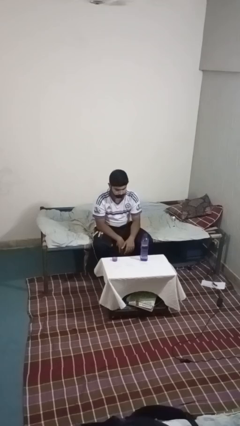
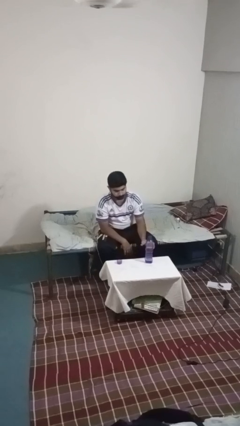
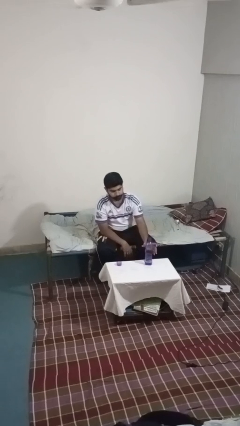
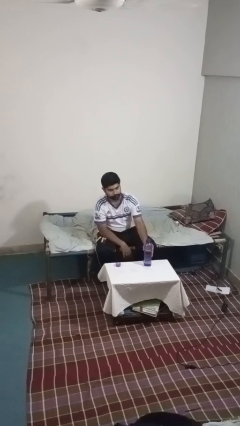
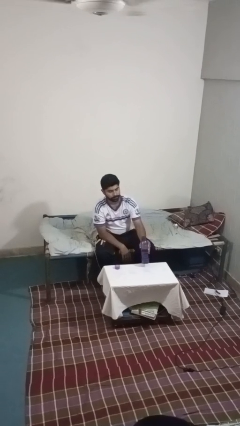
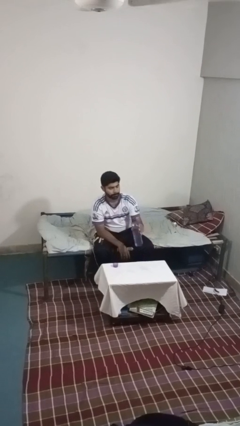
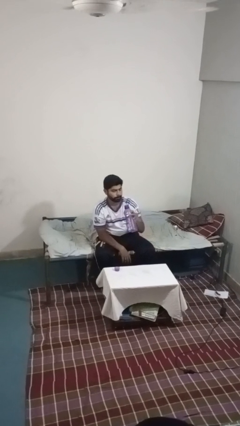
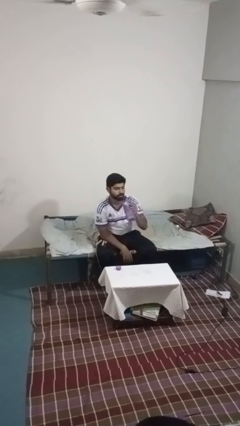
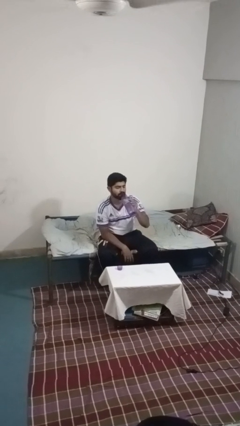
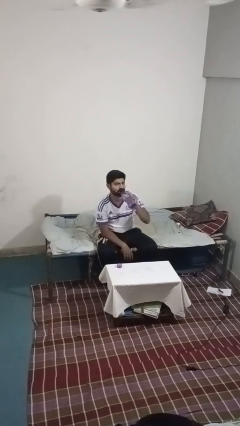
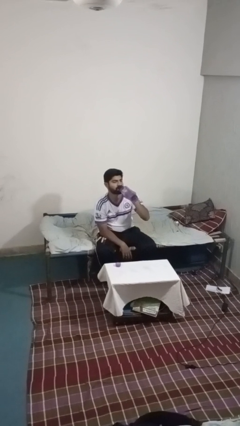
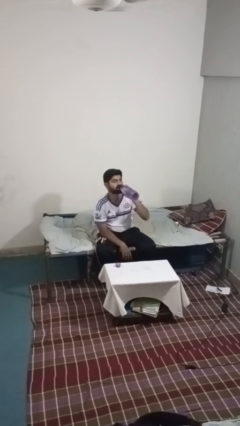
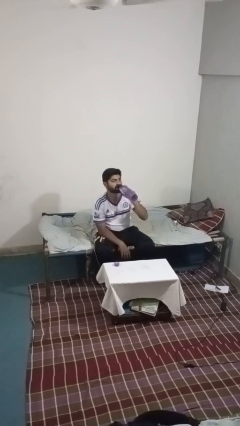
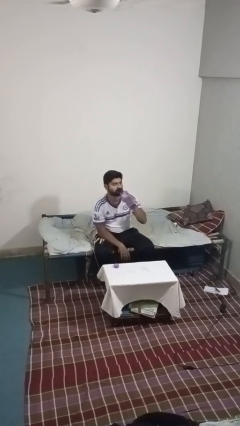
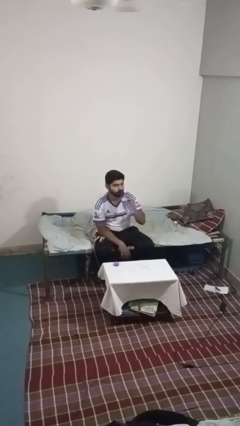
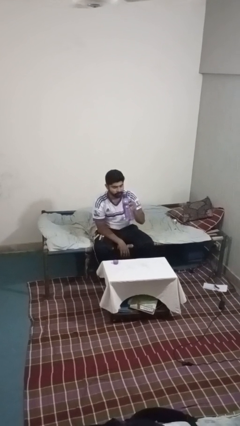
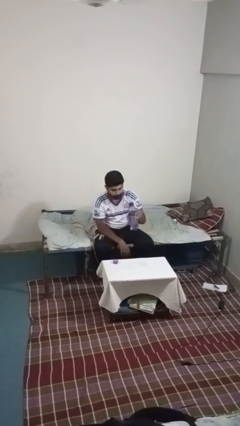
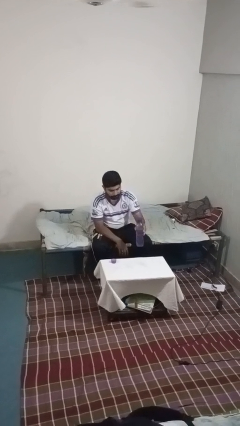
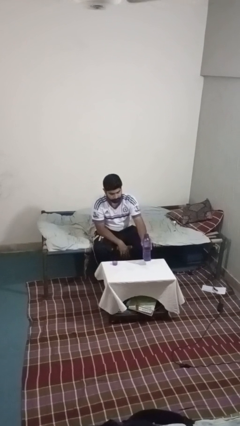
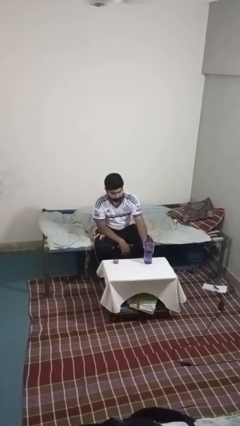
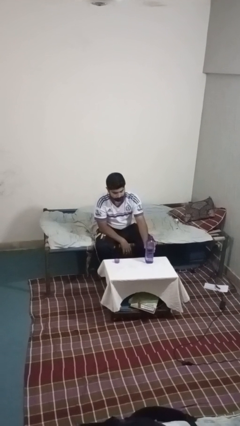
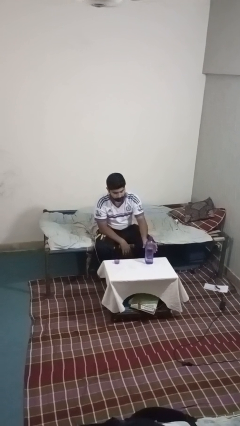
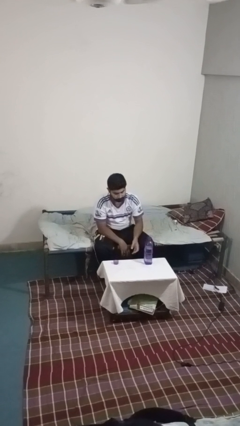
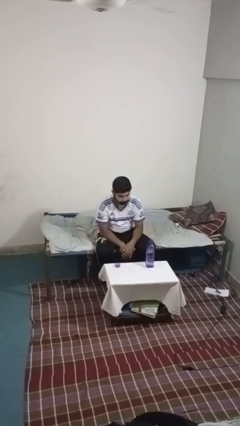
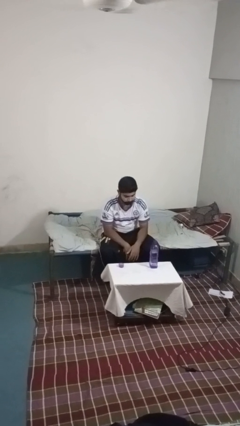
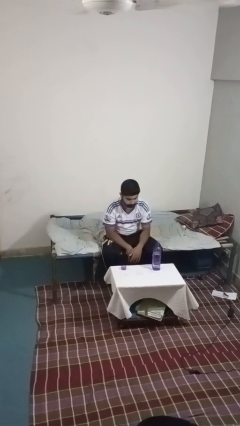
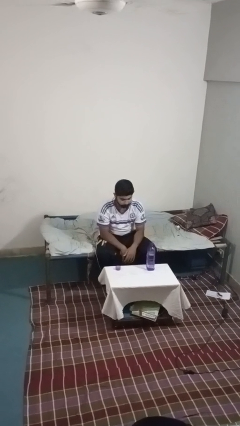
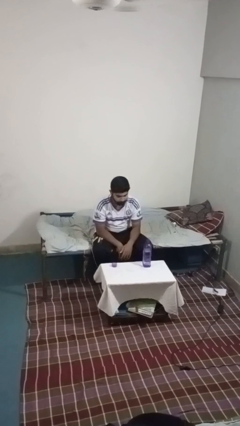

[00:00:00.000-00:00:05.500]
person drinks from bottle

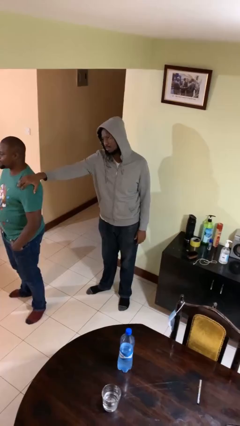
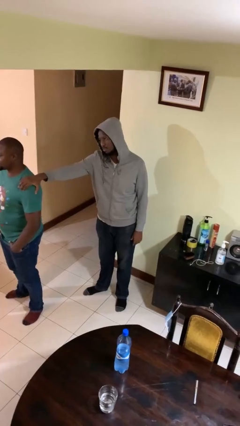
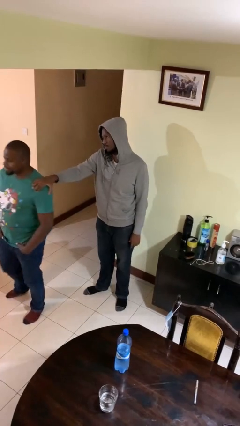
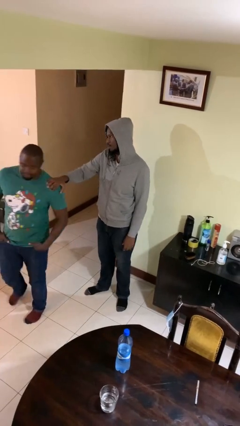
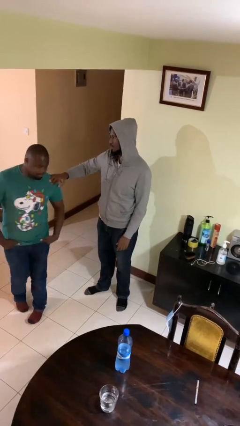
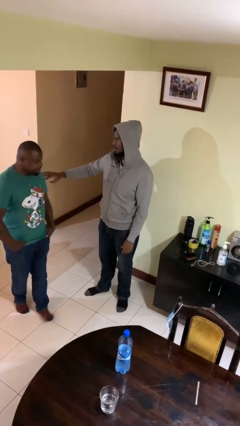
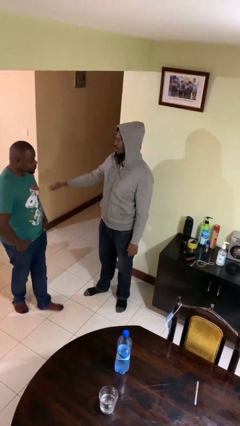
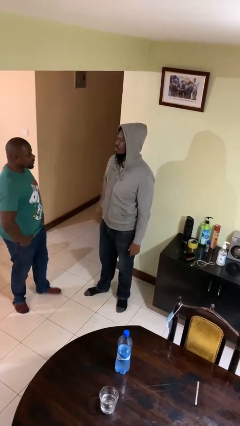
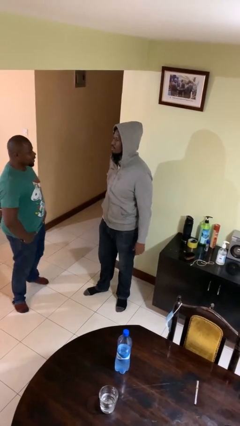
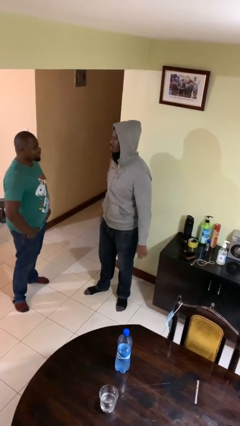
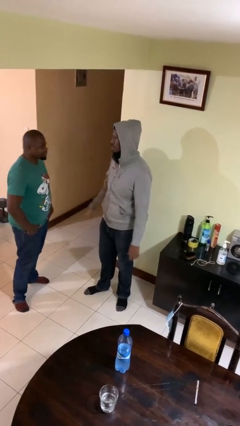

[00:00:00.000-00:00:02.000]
person spins person around

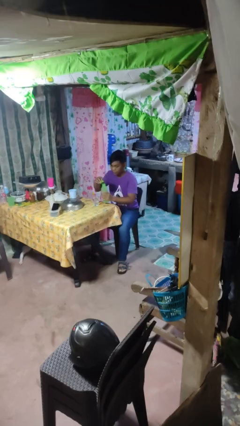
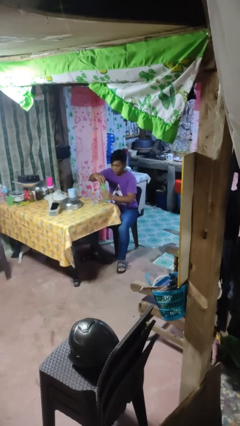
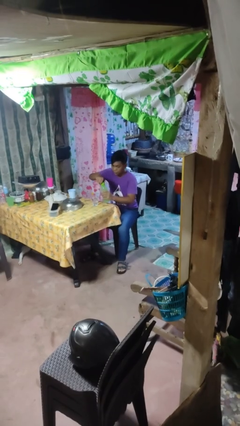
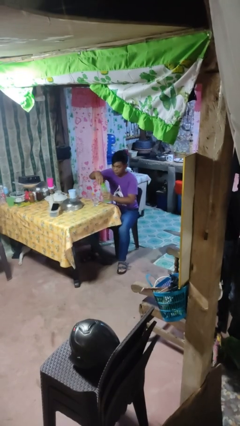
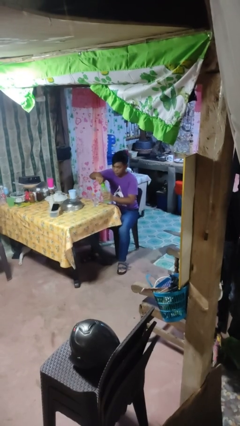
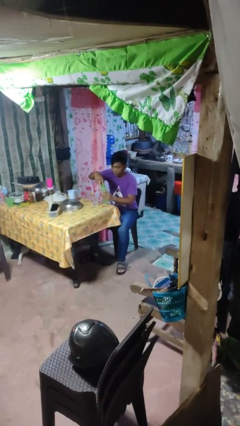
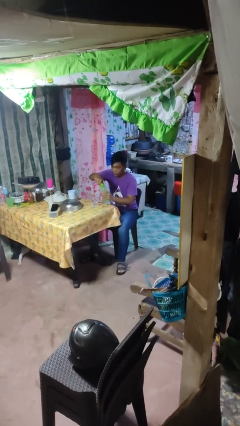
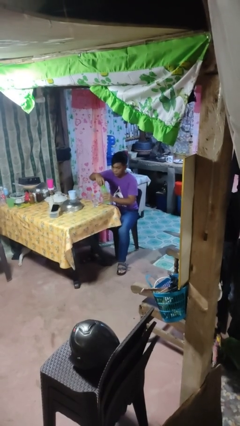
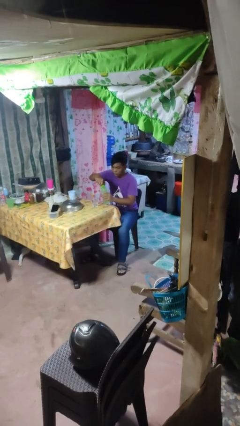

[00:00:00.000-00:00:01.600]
person screws lid to bottle

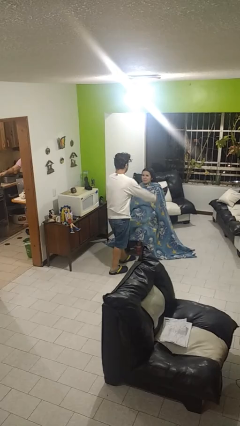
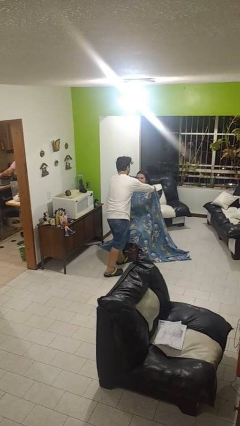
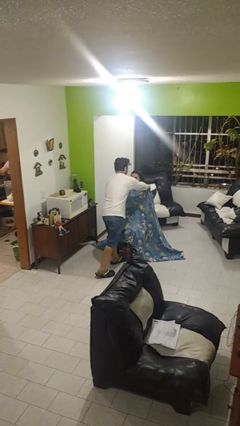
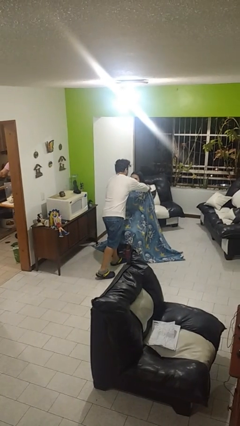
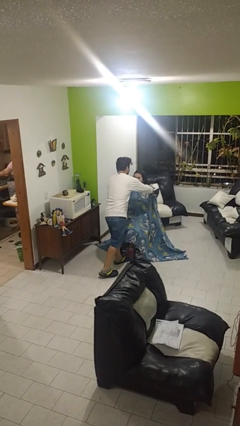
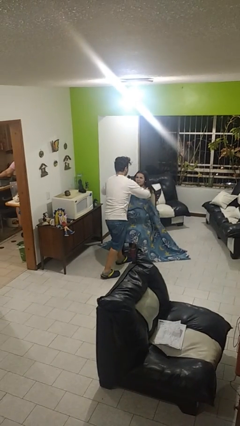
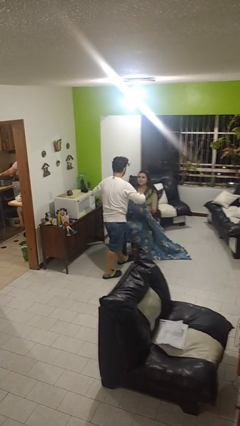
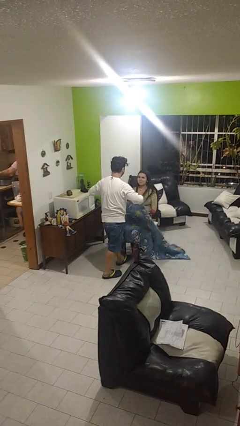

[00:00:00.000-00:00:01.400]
person uncovers friend with blanket

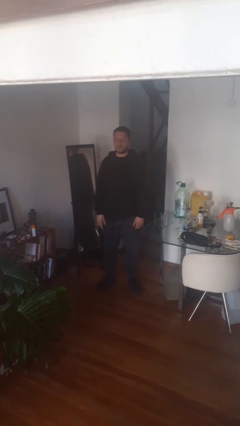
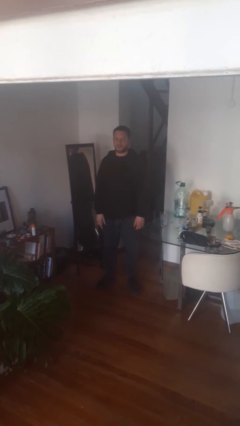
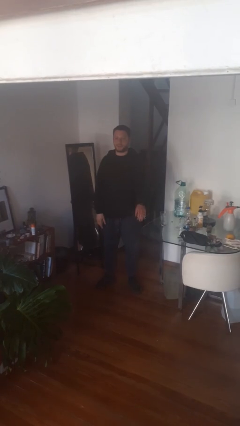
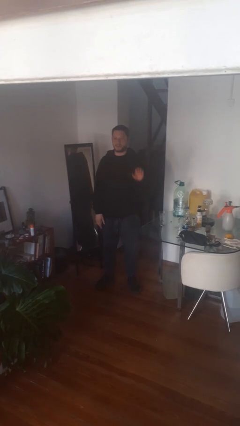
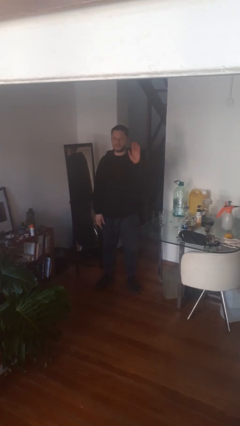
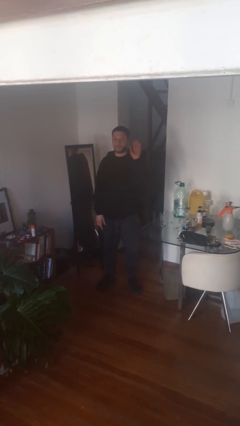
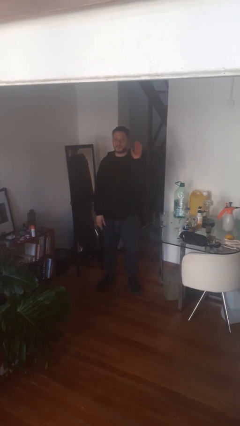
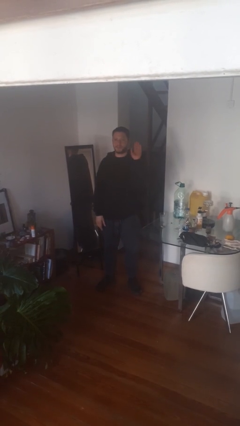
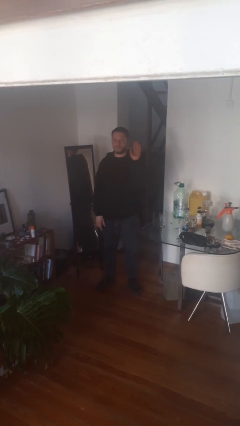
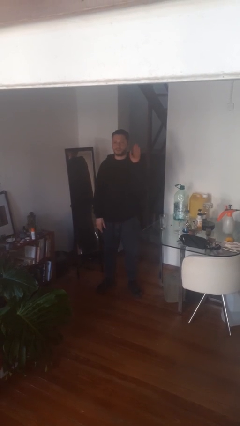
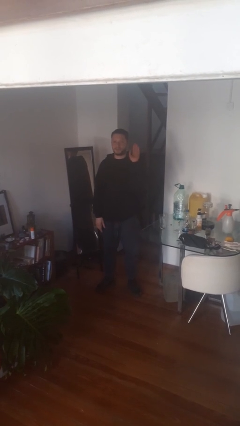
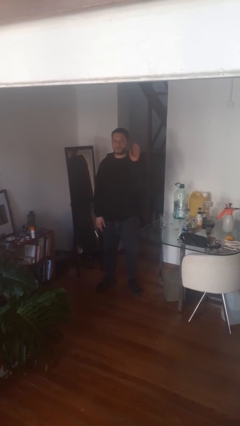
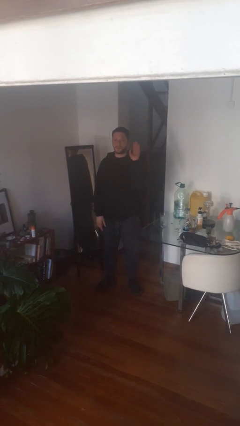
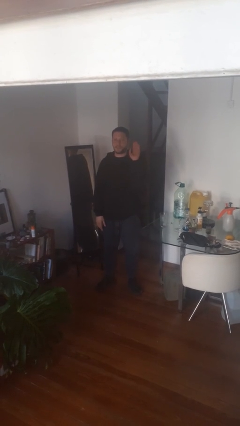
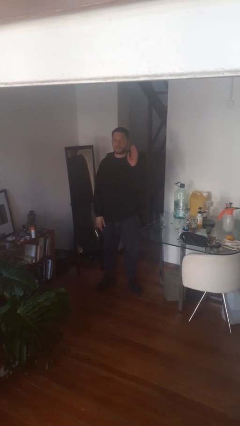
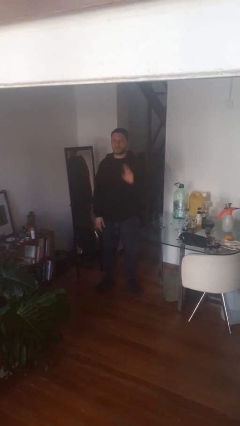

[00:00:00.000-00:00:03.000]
person gestures raise hand

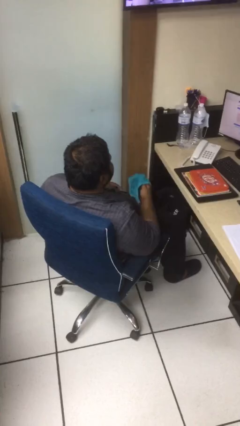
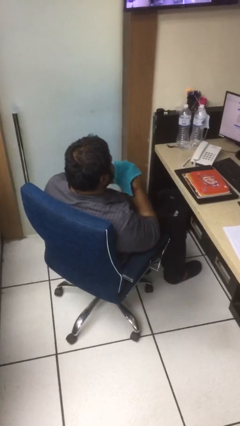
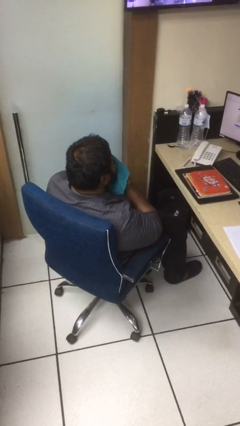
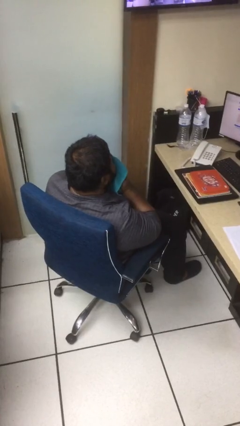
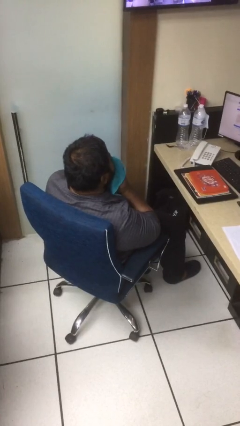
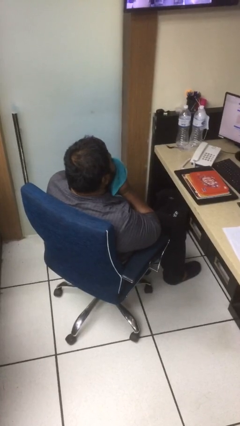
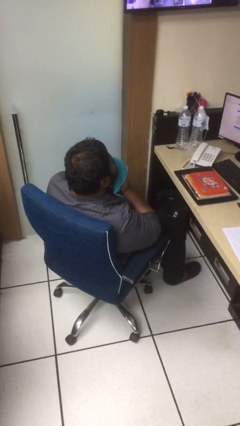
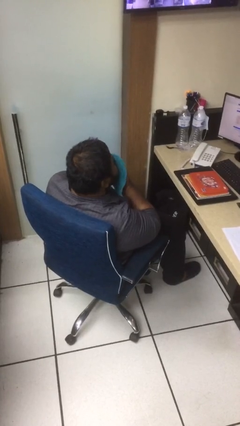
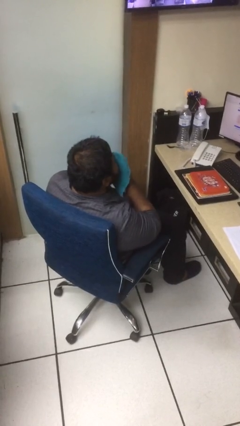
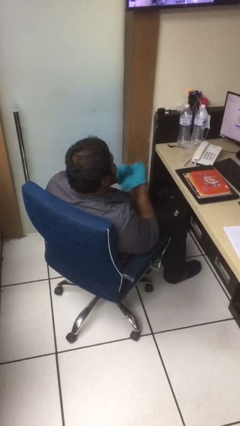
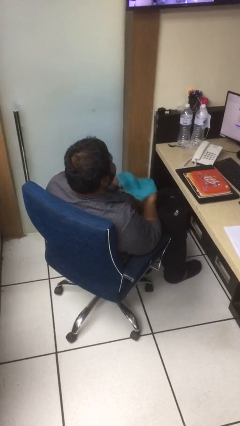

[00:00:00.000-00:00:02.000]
person wipes mouth with napkin

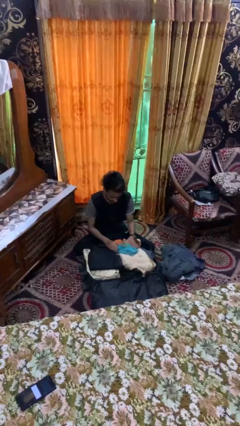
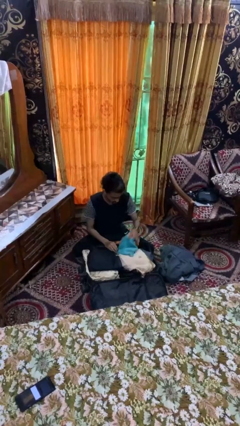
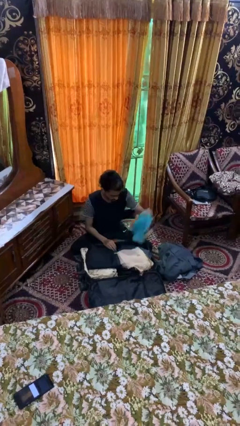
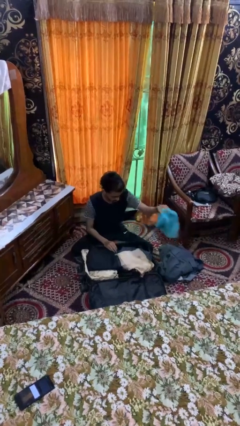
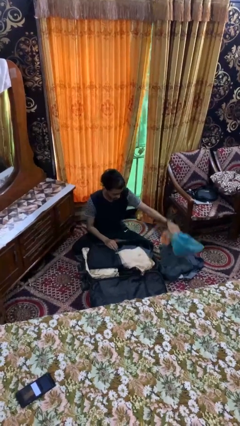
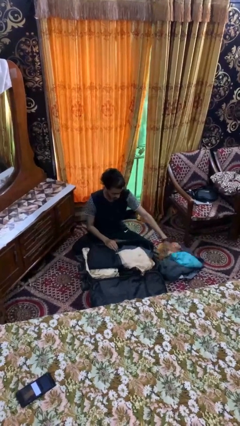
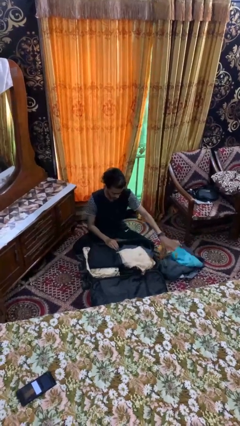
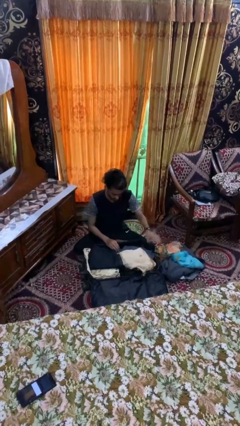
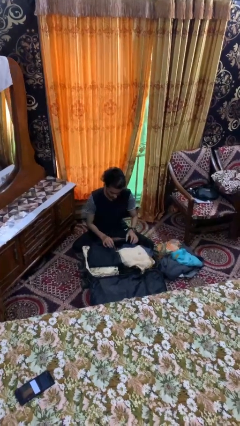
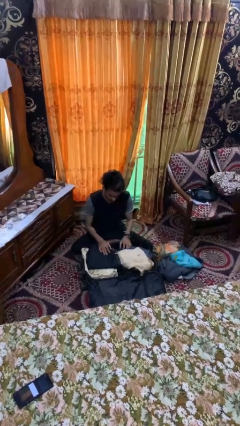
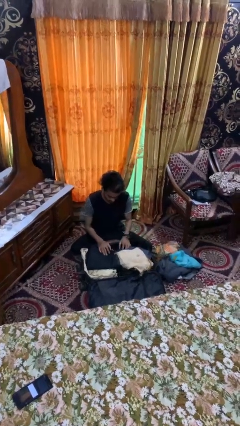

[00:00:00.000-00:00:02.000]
person unloads clothes from suitcase
